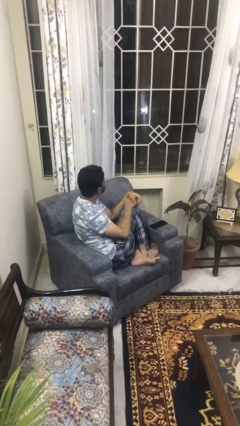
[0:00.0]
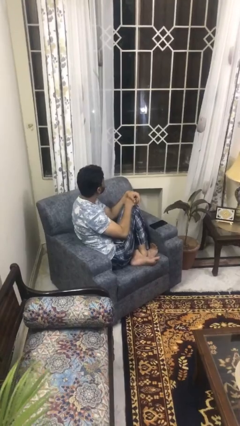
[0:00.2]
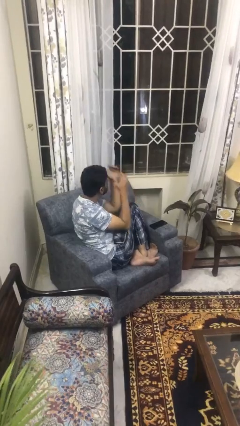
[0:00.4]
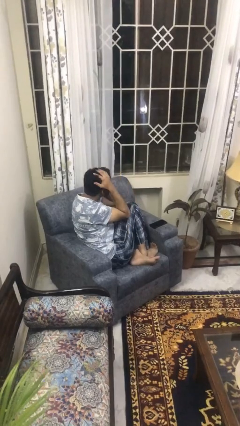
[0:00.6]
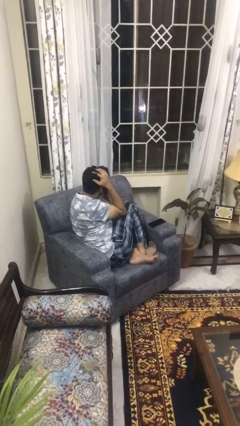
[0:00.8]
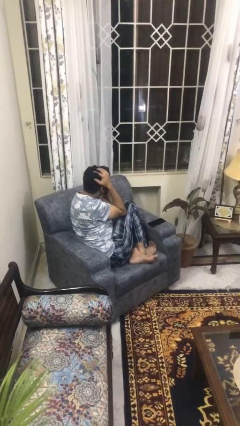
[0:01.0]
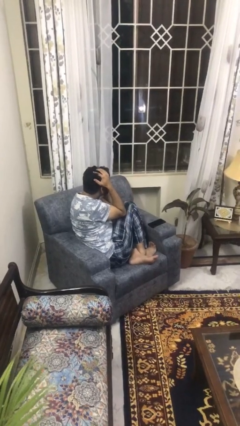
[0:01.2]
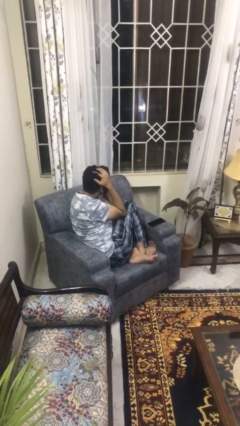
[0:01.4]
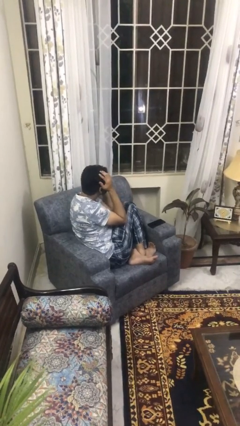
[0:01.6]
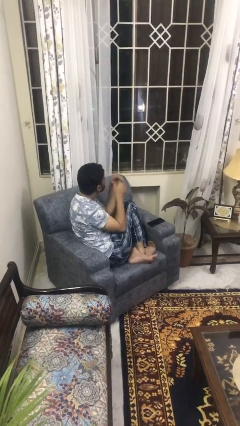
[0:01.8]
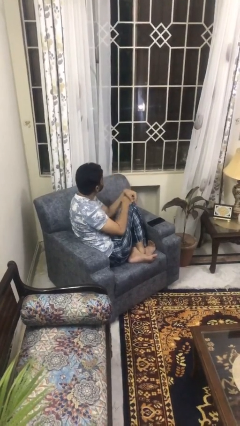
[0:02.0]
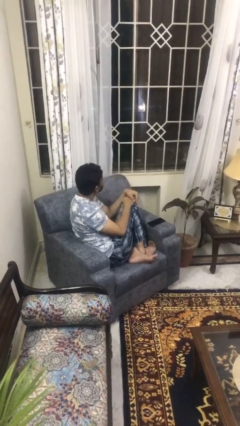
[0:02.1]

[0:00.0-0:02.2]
person covers face with hands

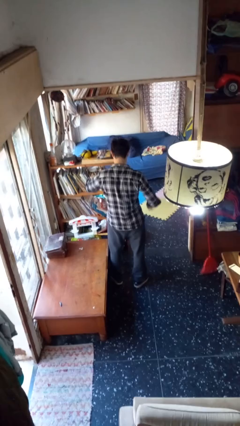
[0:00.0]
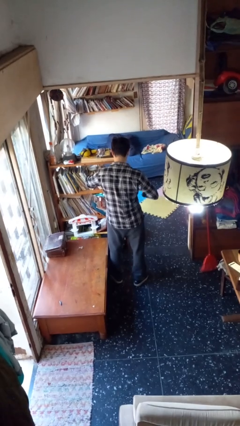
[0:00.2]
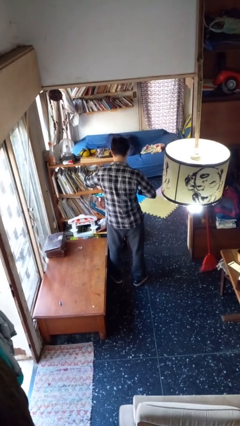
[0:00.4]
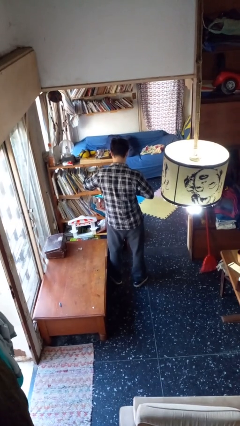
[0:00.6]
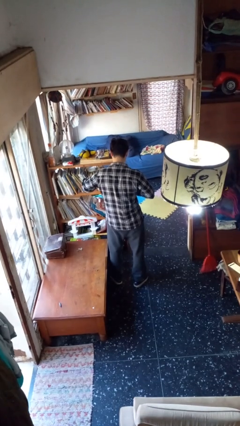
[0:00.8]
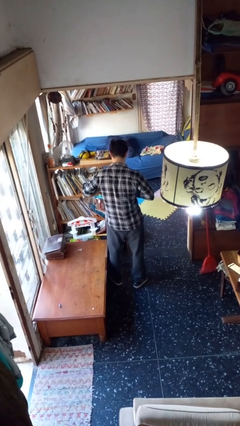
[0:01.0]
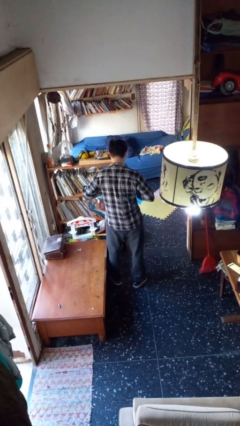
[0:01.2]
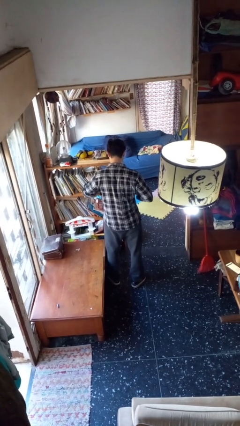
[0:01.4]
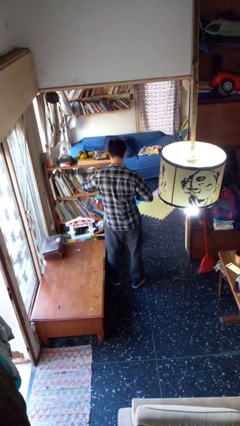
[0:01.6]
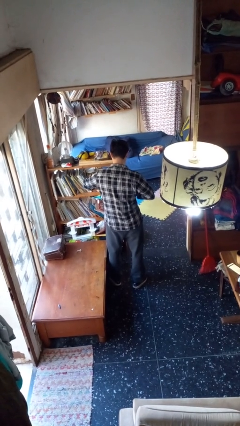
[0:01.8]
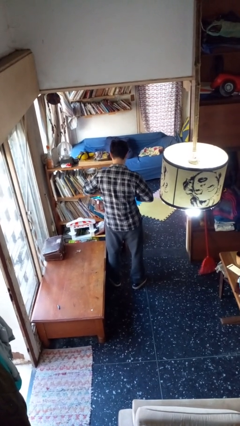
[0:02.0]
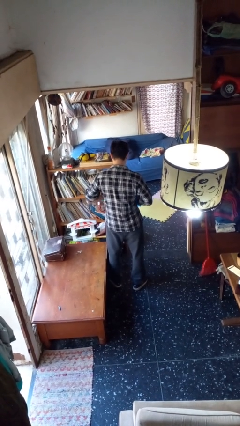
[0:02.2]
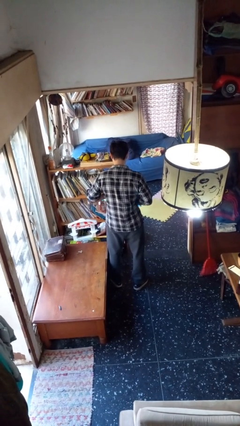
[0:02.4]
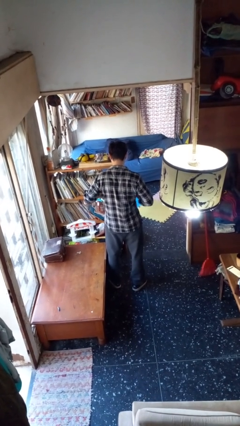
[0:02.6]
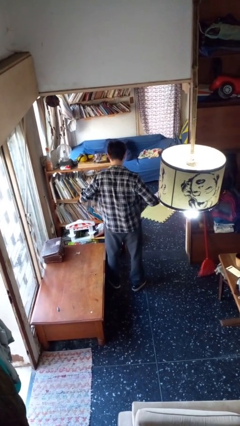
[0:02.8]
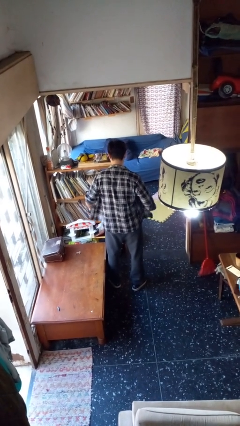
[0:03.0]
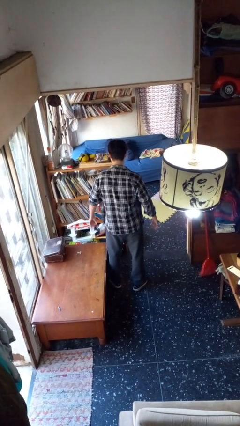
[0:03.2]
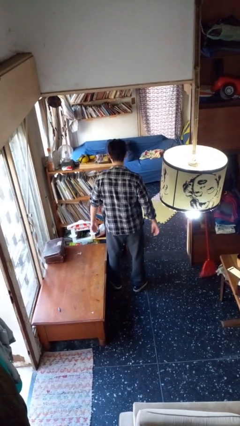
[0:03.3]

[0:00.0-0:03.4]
person unbuttons shirt

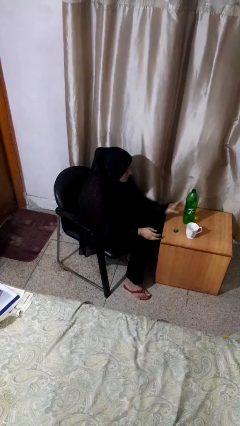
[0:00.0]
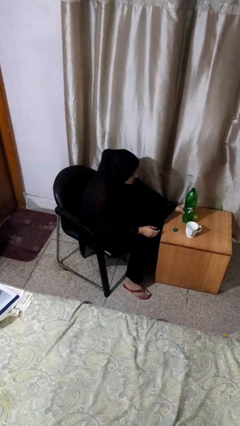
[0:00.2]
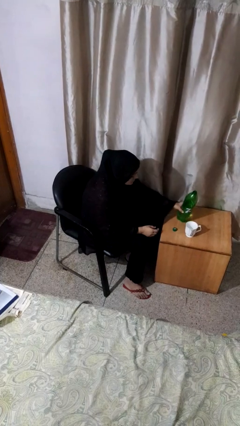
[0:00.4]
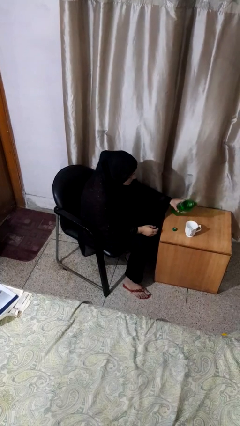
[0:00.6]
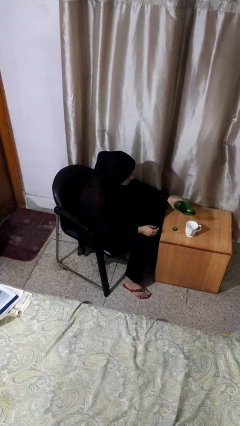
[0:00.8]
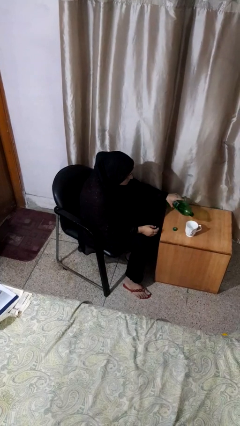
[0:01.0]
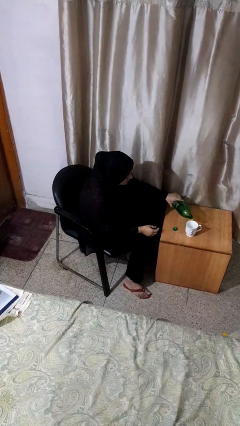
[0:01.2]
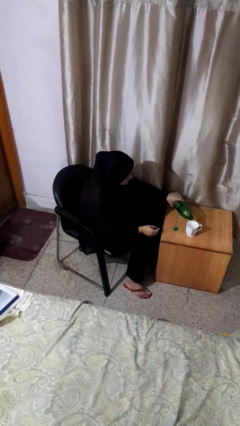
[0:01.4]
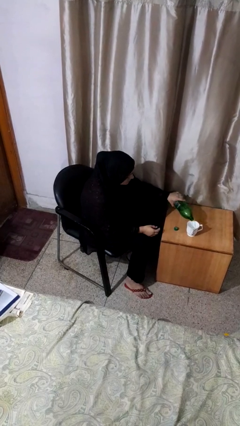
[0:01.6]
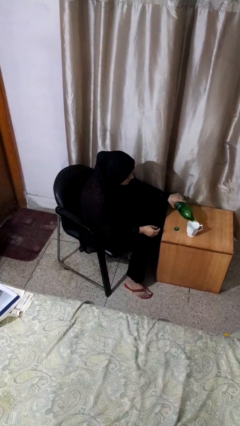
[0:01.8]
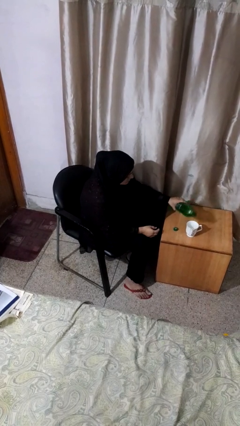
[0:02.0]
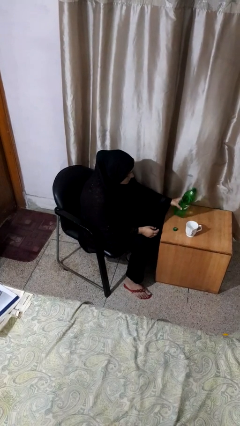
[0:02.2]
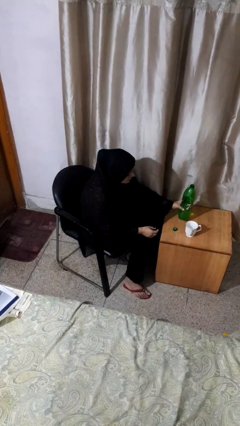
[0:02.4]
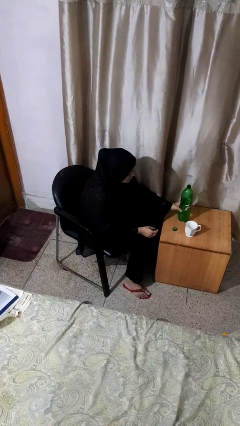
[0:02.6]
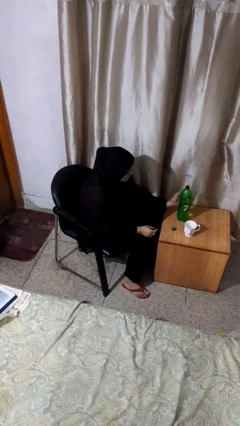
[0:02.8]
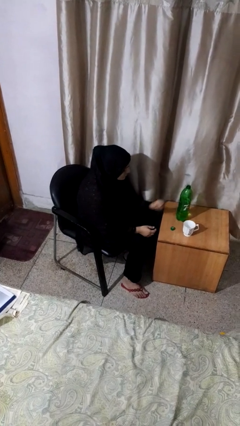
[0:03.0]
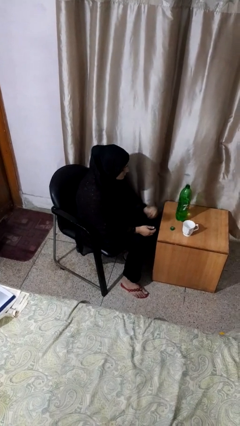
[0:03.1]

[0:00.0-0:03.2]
person pours liquid into cup

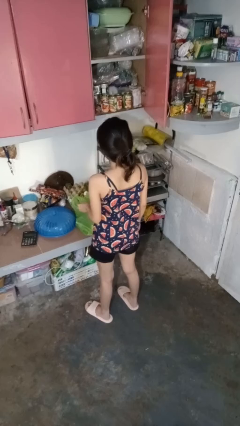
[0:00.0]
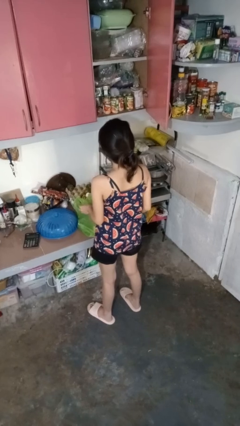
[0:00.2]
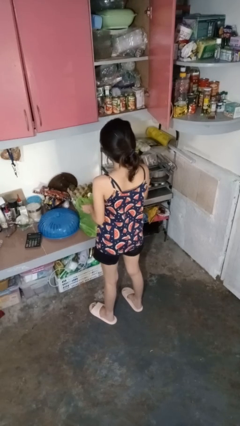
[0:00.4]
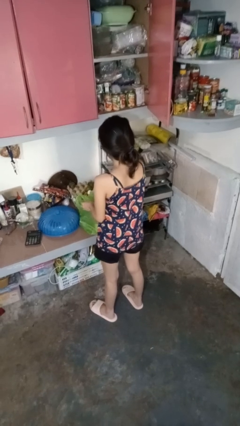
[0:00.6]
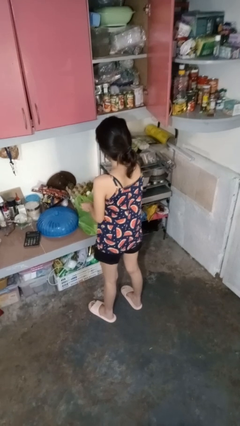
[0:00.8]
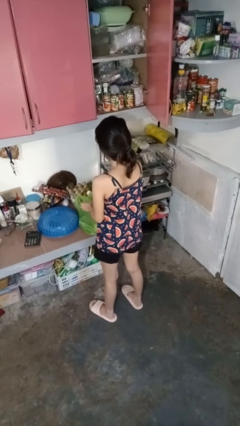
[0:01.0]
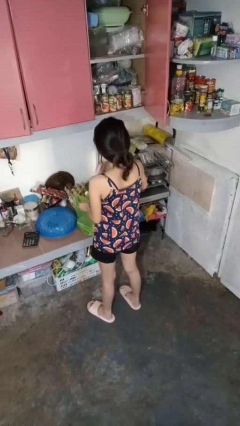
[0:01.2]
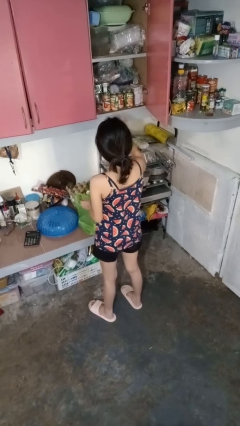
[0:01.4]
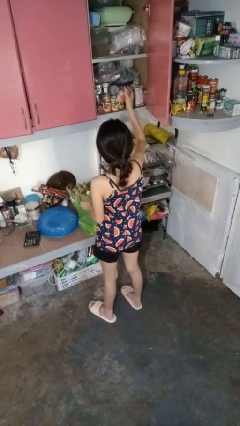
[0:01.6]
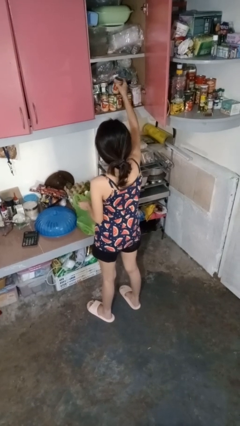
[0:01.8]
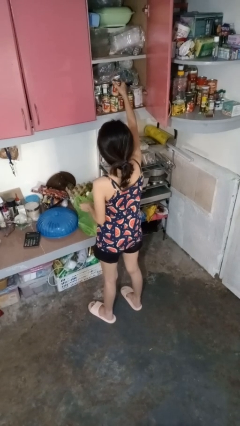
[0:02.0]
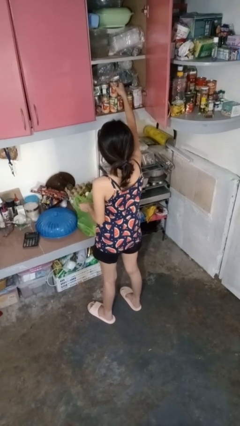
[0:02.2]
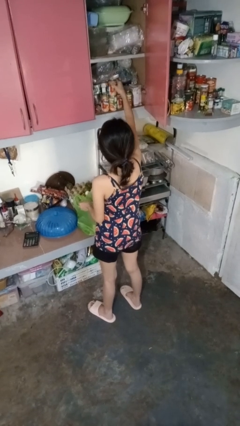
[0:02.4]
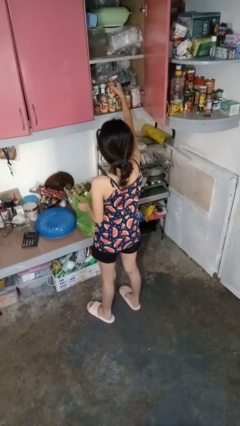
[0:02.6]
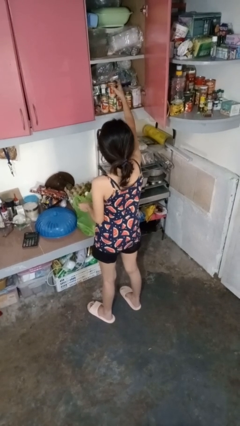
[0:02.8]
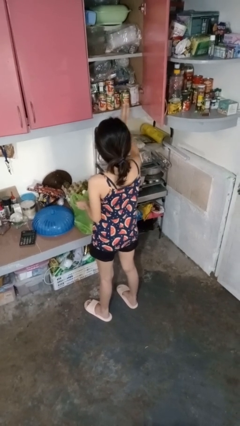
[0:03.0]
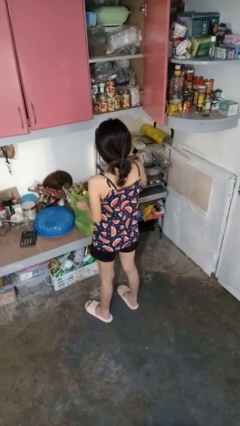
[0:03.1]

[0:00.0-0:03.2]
person loads groceries into cabinet

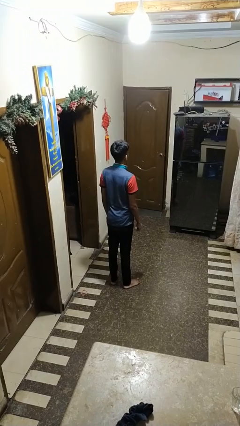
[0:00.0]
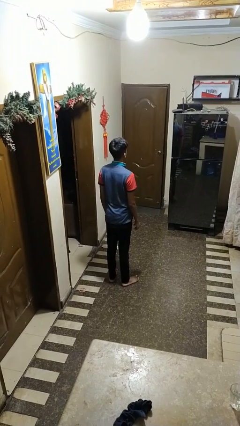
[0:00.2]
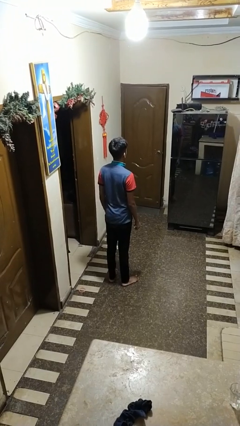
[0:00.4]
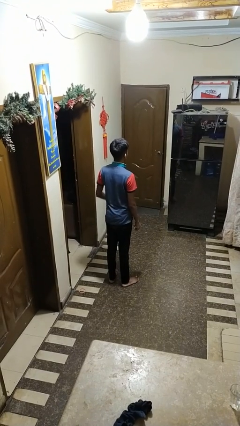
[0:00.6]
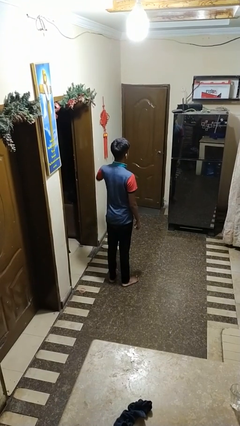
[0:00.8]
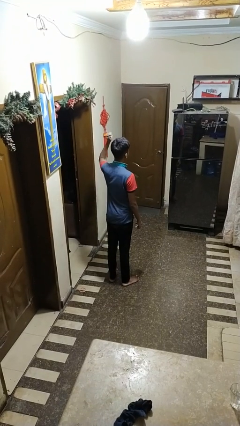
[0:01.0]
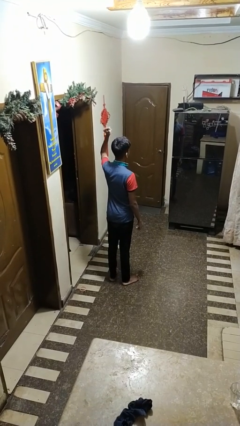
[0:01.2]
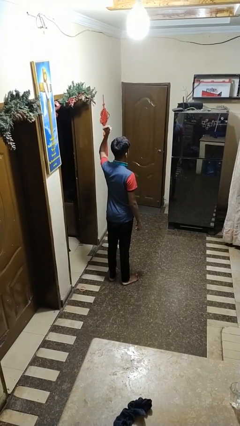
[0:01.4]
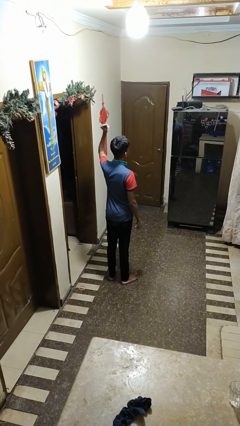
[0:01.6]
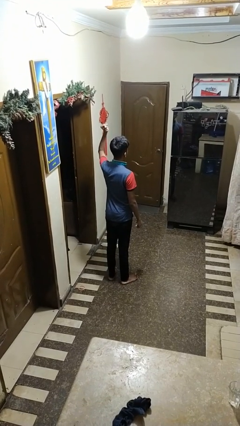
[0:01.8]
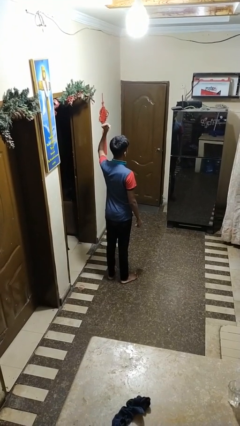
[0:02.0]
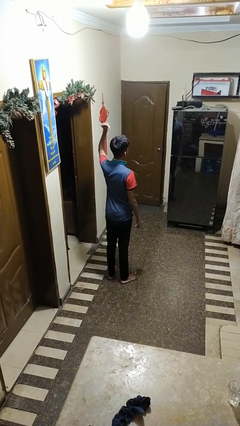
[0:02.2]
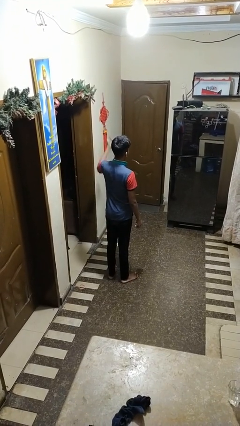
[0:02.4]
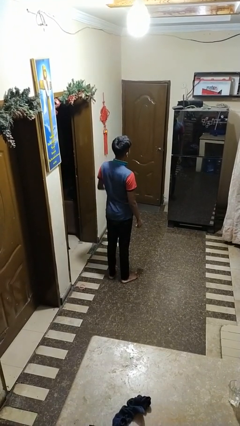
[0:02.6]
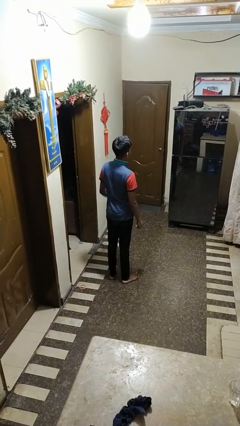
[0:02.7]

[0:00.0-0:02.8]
person snaps fingers

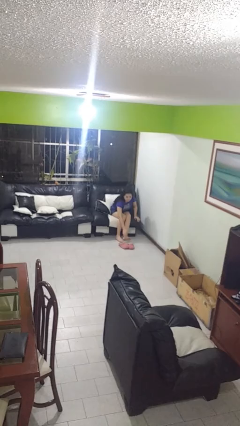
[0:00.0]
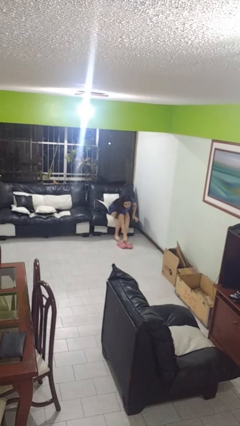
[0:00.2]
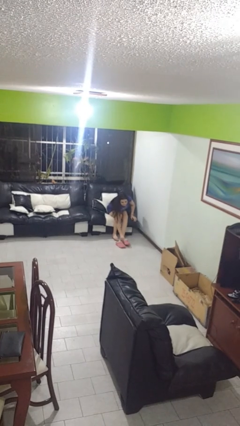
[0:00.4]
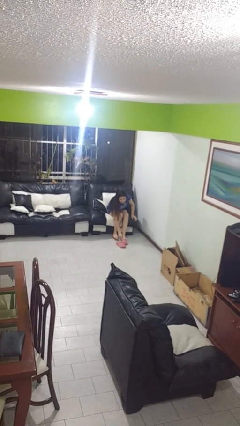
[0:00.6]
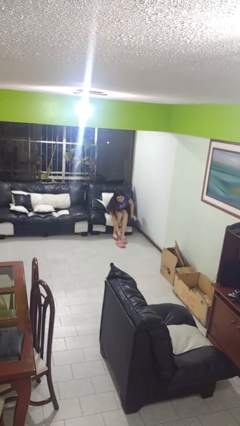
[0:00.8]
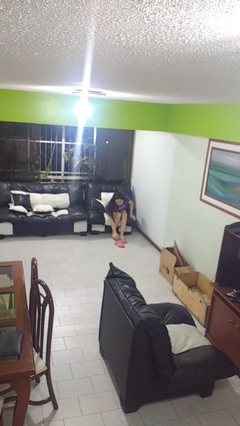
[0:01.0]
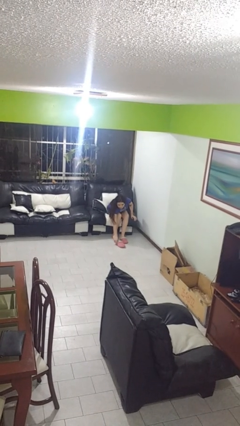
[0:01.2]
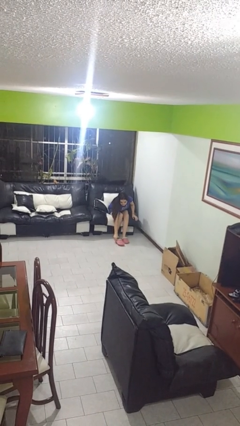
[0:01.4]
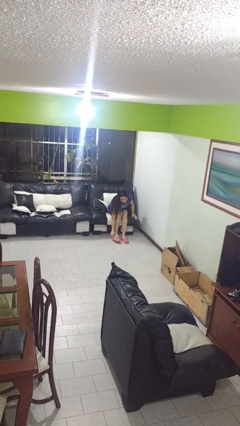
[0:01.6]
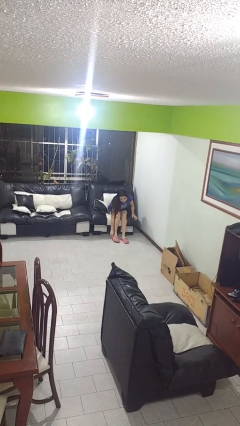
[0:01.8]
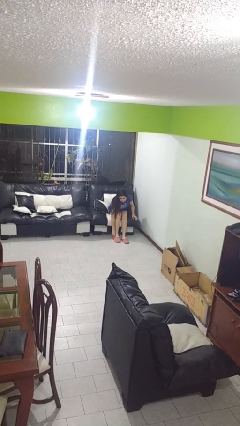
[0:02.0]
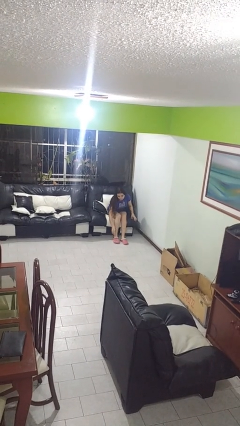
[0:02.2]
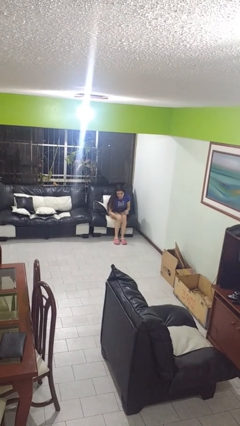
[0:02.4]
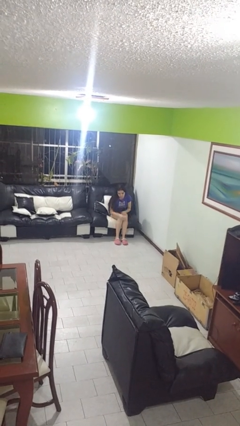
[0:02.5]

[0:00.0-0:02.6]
person puts on shoes
